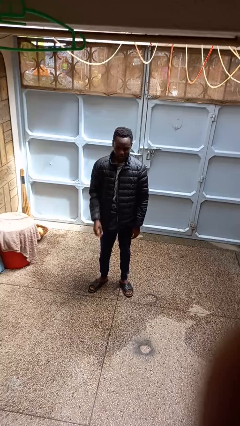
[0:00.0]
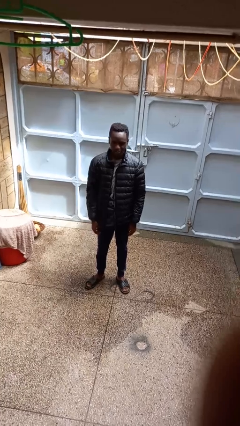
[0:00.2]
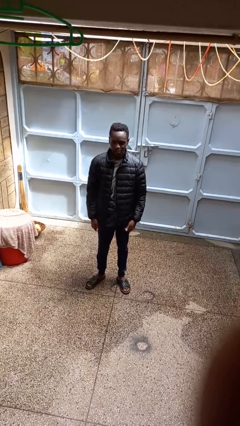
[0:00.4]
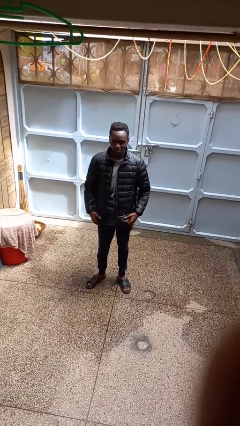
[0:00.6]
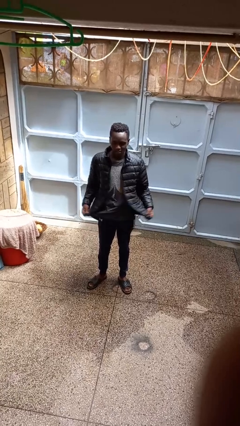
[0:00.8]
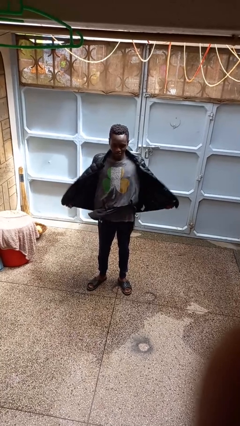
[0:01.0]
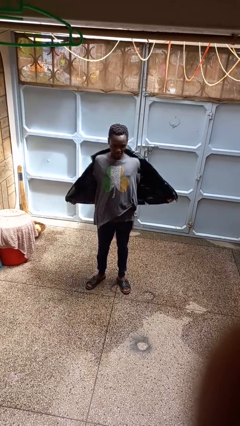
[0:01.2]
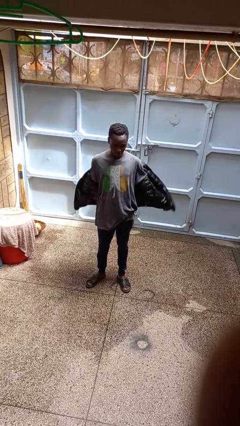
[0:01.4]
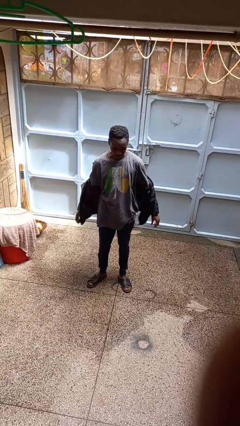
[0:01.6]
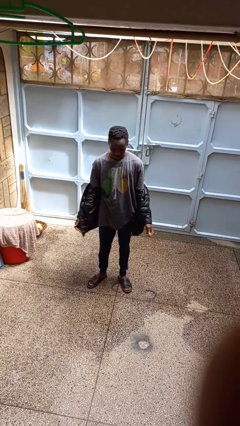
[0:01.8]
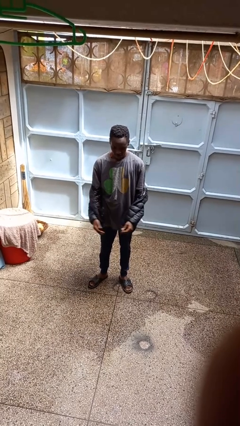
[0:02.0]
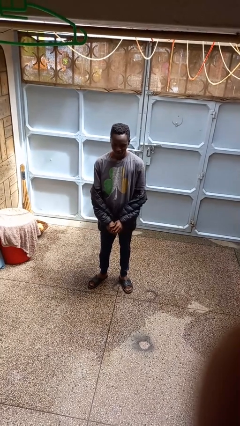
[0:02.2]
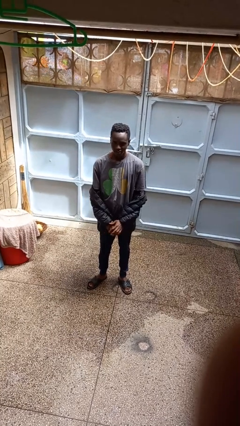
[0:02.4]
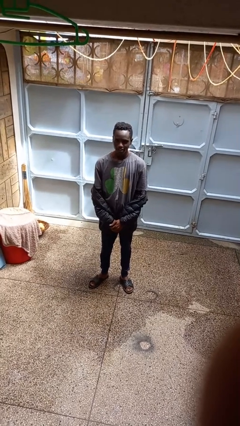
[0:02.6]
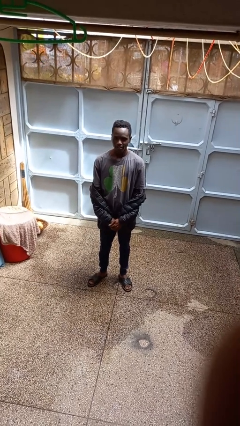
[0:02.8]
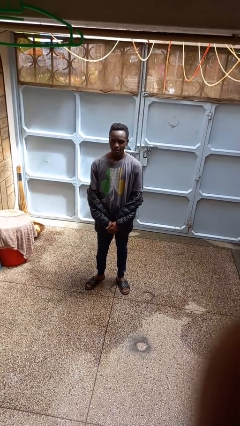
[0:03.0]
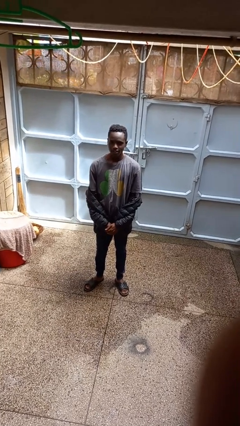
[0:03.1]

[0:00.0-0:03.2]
person takes off jacket

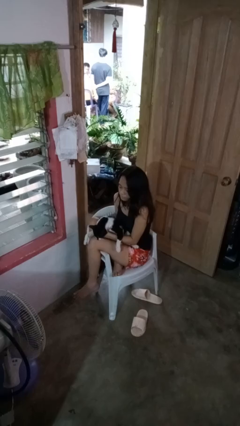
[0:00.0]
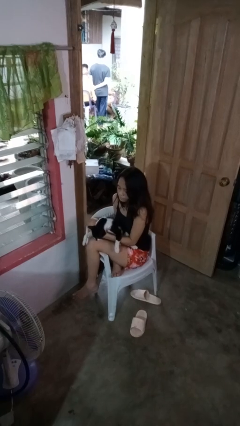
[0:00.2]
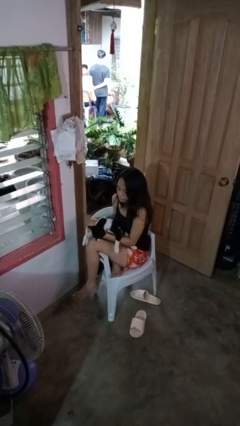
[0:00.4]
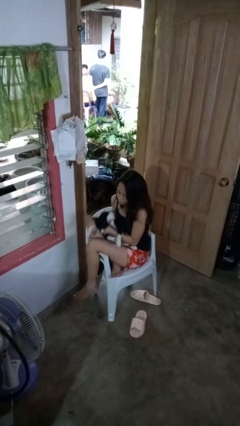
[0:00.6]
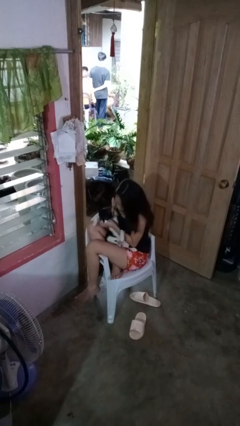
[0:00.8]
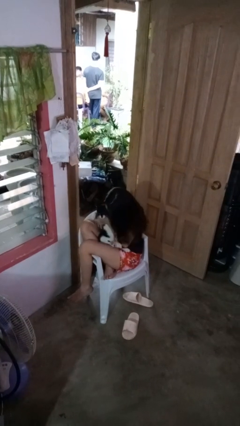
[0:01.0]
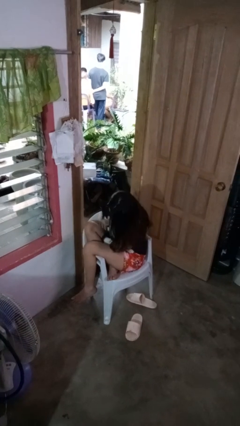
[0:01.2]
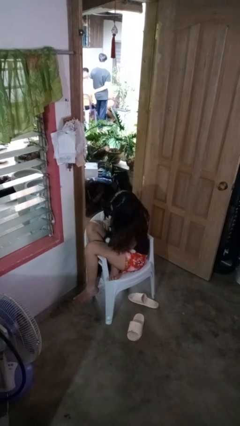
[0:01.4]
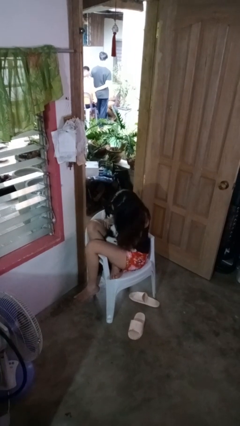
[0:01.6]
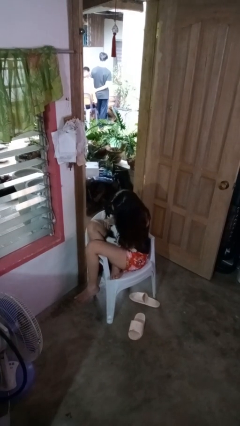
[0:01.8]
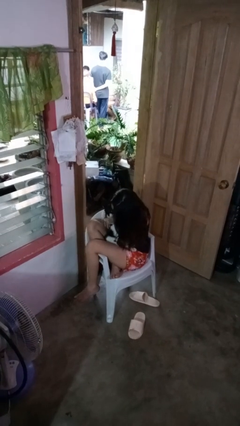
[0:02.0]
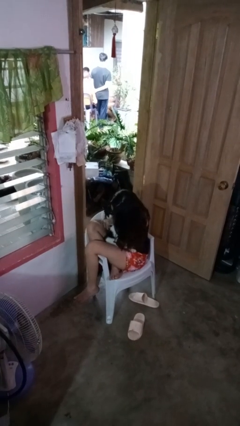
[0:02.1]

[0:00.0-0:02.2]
person hugs cat

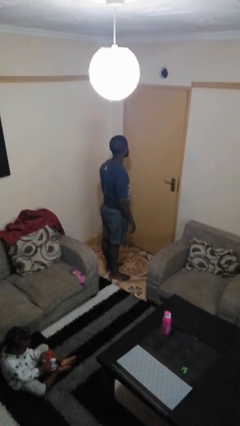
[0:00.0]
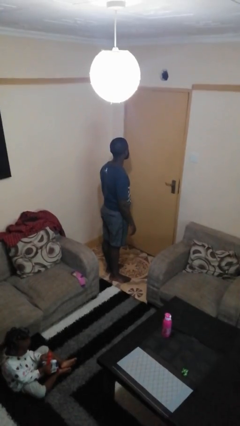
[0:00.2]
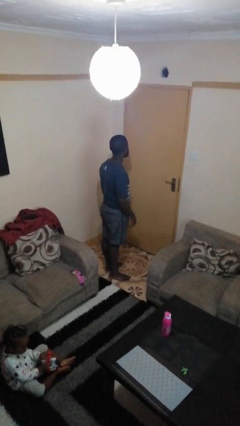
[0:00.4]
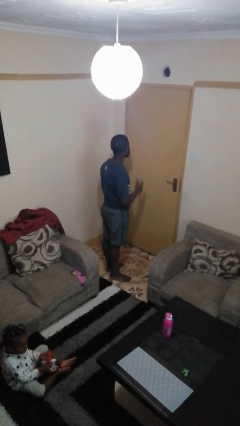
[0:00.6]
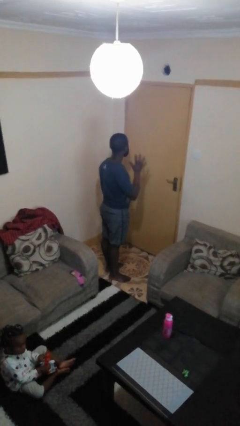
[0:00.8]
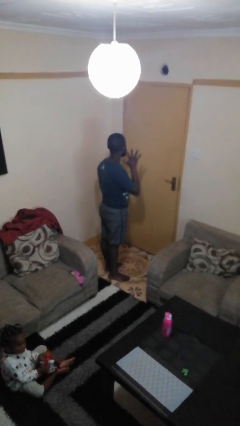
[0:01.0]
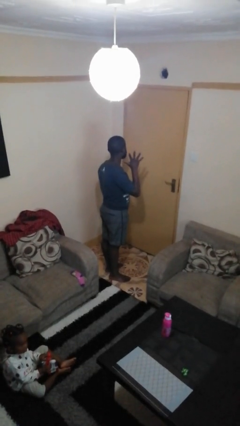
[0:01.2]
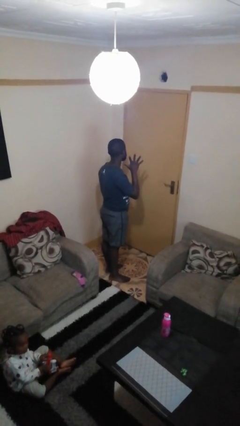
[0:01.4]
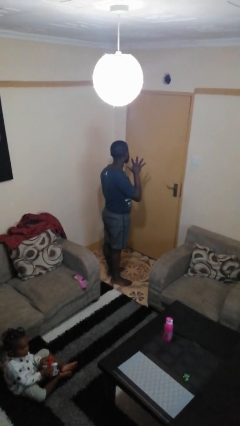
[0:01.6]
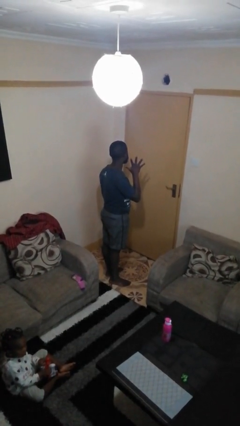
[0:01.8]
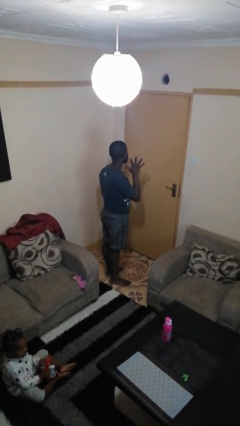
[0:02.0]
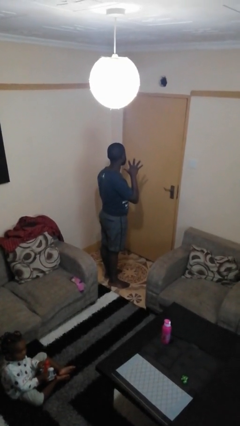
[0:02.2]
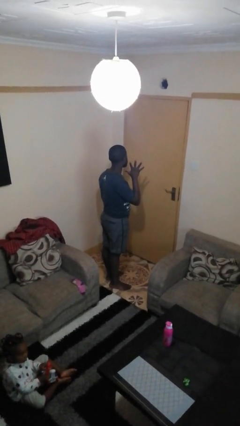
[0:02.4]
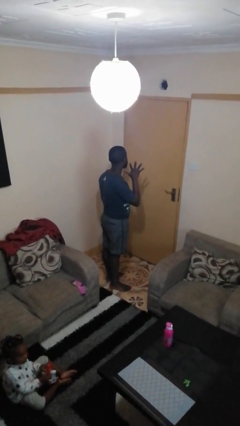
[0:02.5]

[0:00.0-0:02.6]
person gestures number five

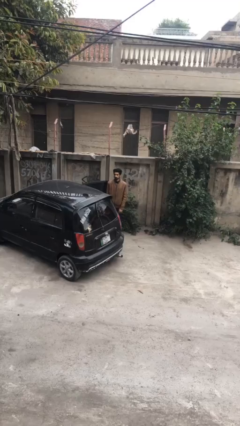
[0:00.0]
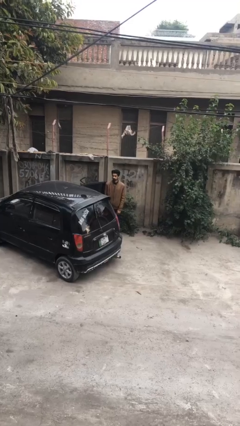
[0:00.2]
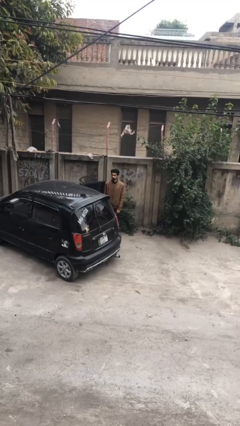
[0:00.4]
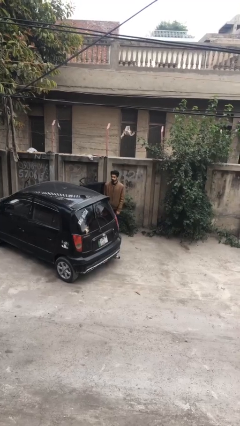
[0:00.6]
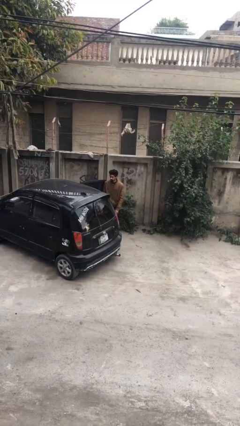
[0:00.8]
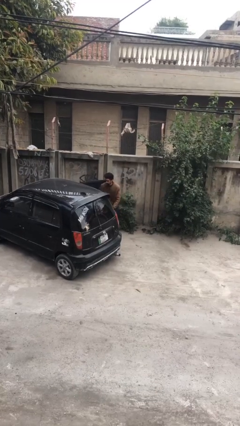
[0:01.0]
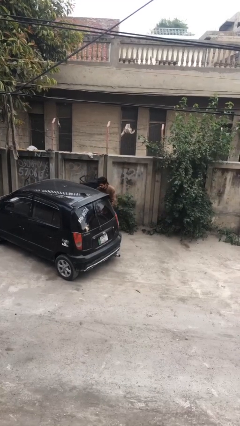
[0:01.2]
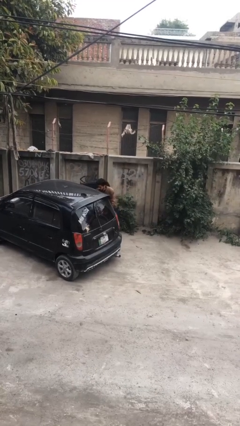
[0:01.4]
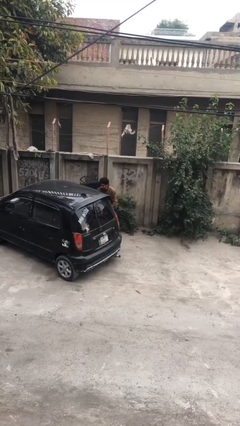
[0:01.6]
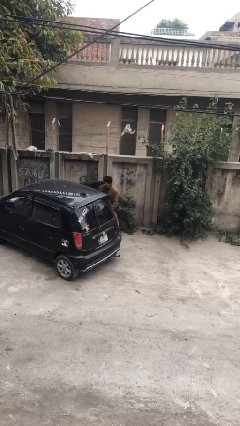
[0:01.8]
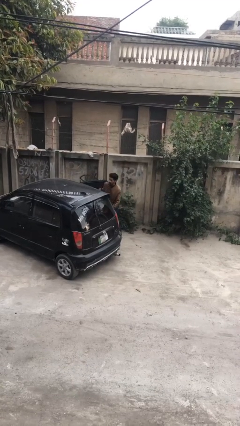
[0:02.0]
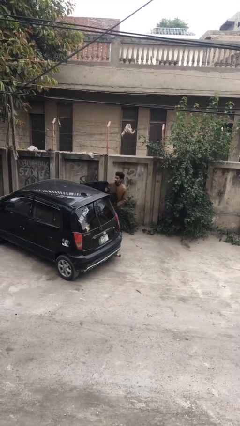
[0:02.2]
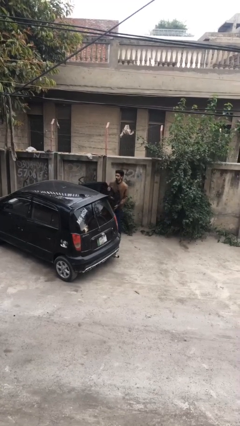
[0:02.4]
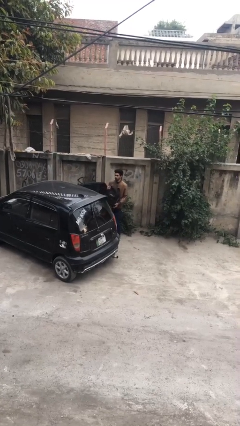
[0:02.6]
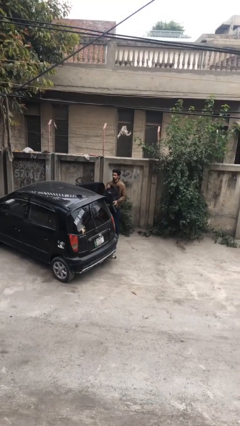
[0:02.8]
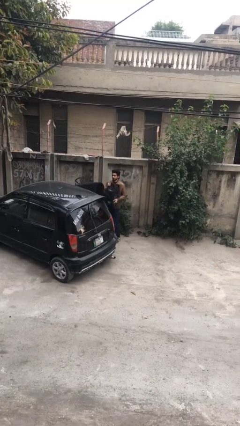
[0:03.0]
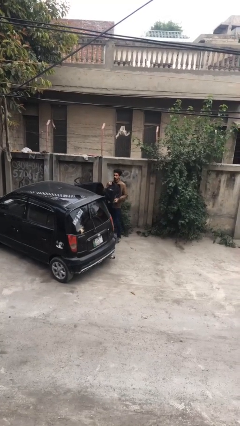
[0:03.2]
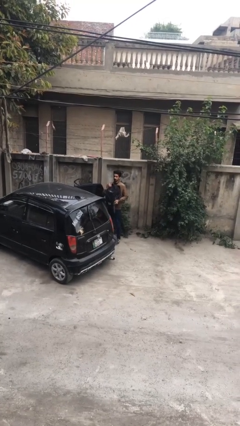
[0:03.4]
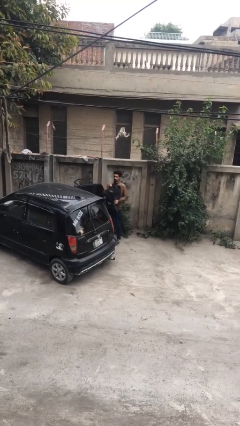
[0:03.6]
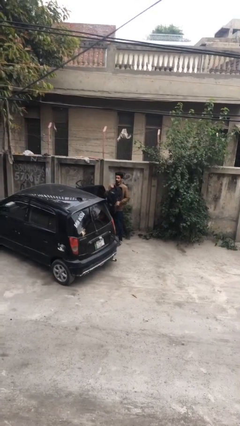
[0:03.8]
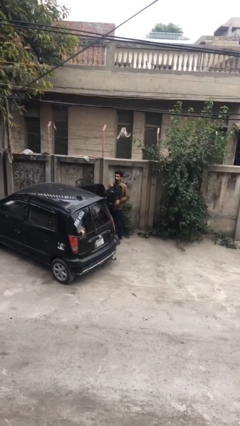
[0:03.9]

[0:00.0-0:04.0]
person unloads car

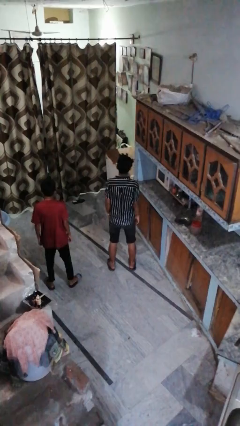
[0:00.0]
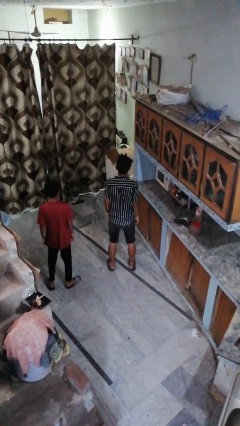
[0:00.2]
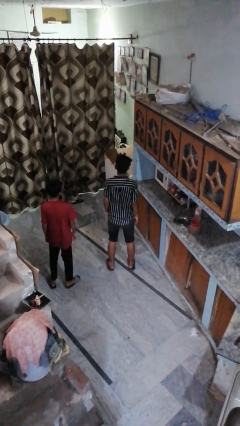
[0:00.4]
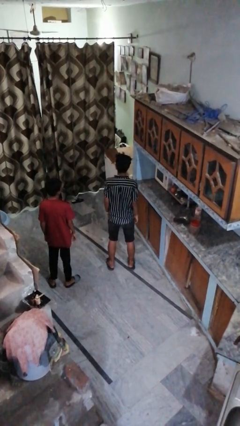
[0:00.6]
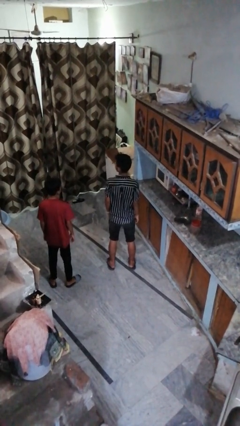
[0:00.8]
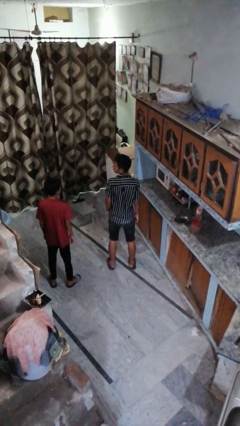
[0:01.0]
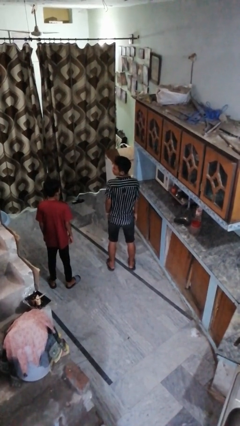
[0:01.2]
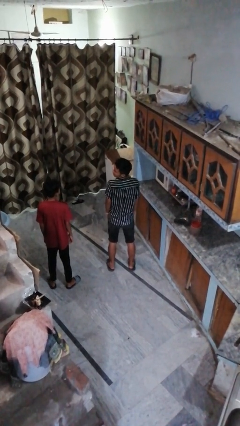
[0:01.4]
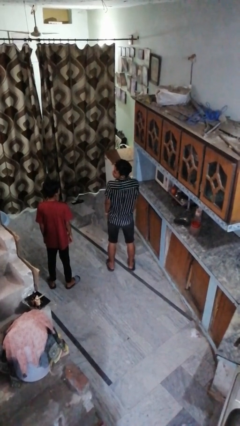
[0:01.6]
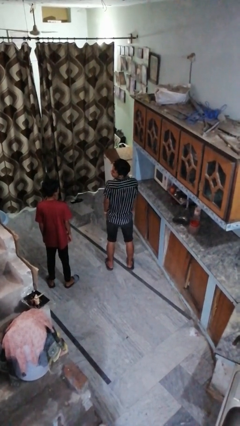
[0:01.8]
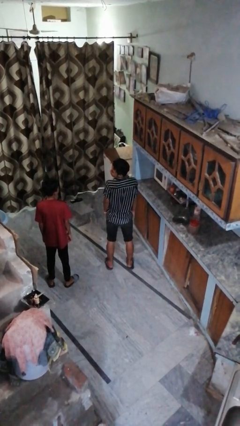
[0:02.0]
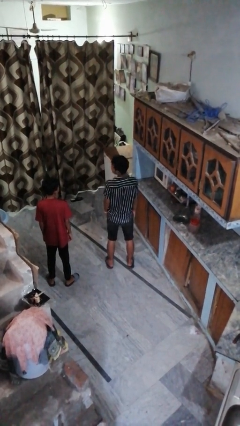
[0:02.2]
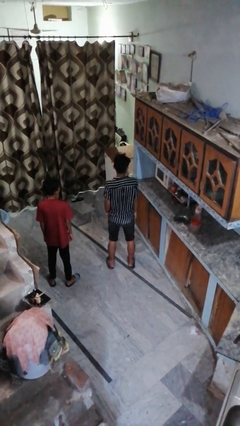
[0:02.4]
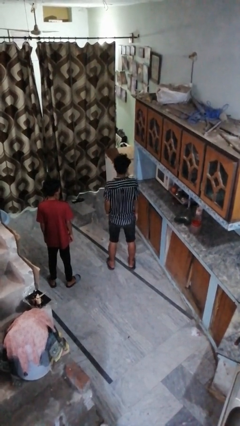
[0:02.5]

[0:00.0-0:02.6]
person looks over shoulder

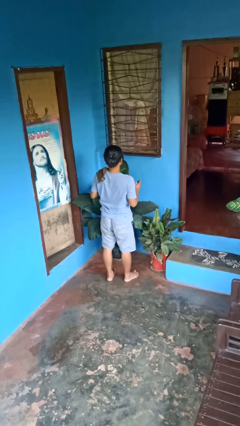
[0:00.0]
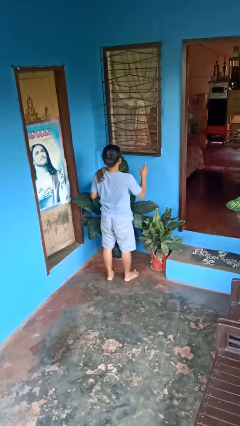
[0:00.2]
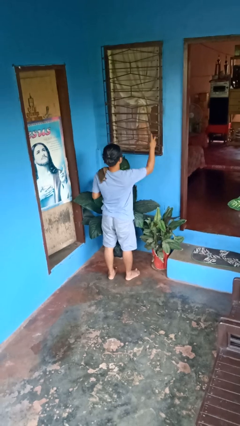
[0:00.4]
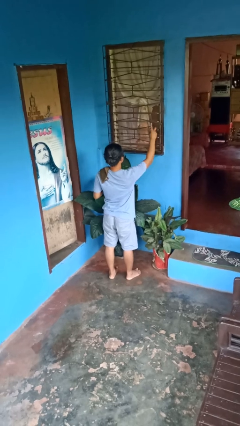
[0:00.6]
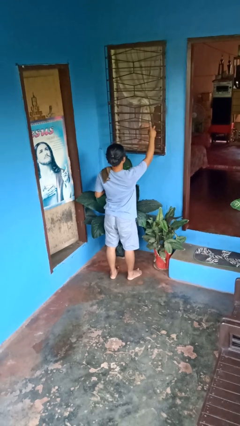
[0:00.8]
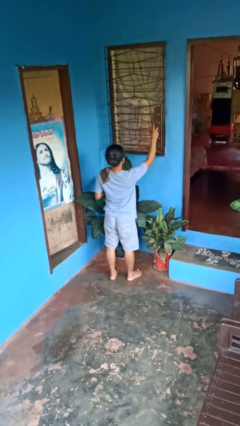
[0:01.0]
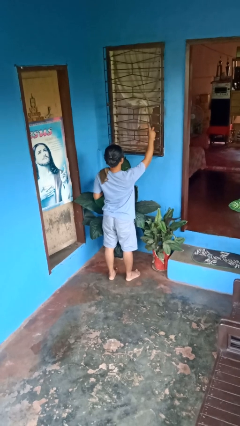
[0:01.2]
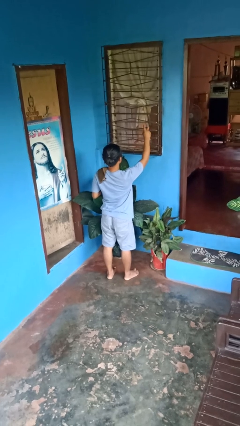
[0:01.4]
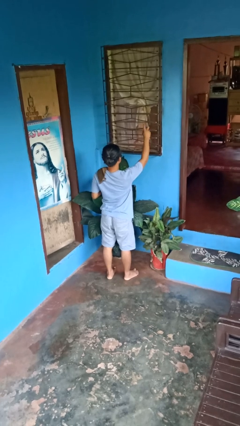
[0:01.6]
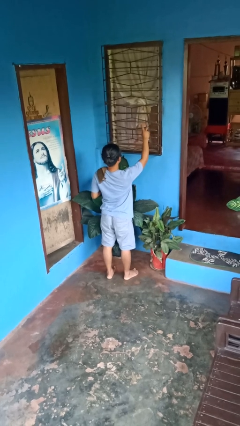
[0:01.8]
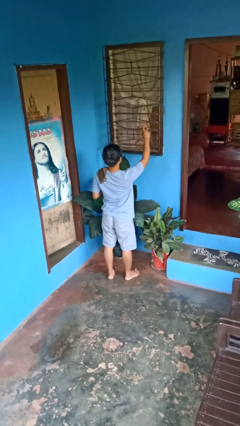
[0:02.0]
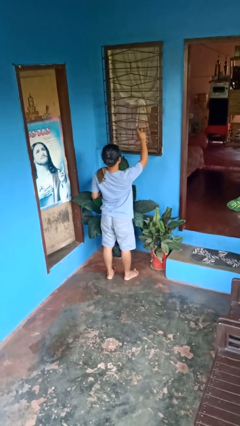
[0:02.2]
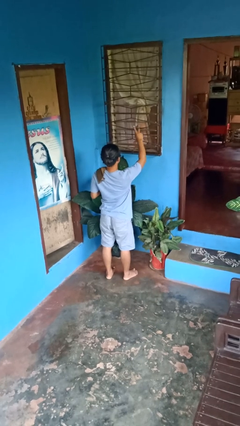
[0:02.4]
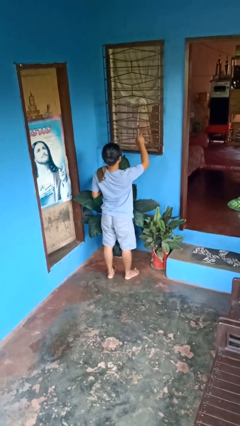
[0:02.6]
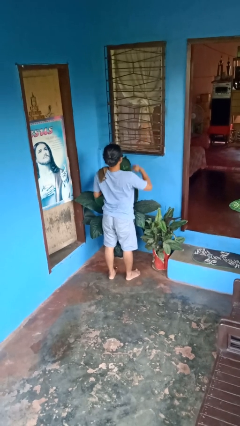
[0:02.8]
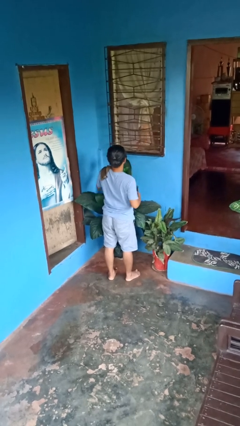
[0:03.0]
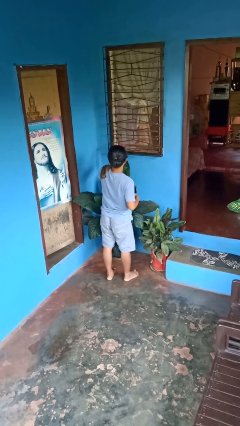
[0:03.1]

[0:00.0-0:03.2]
person sprays from bottle
